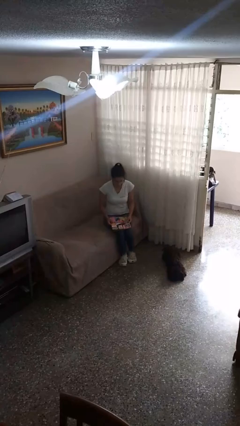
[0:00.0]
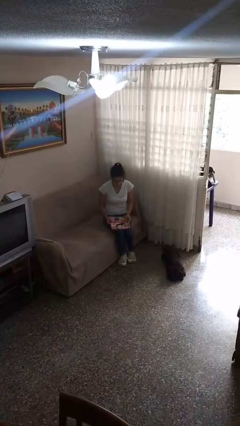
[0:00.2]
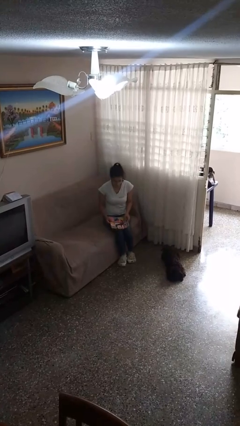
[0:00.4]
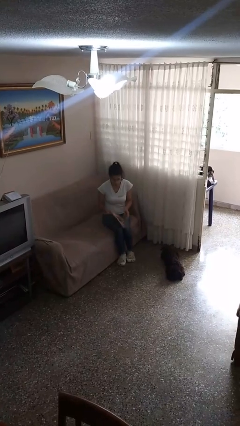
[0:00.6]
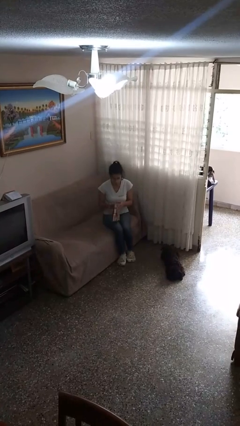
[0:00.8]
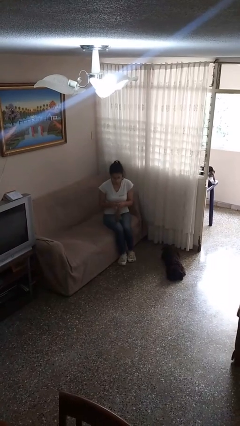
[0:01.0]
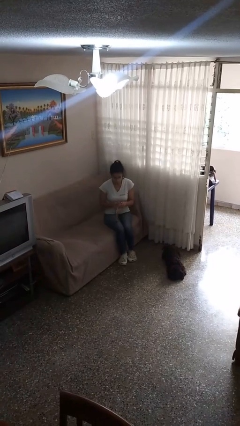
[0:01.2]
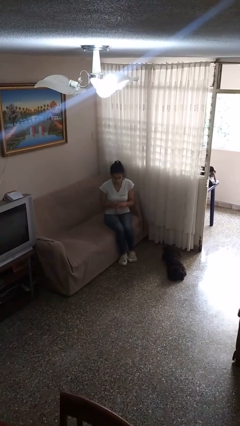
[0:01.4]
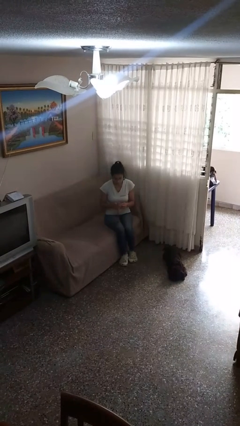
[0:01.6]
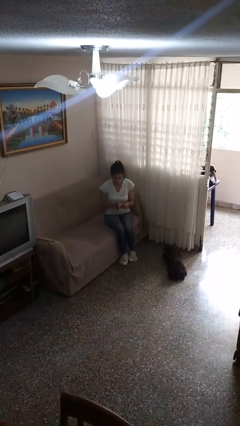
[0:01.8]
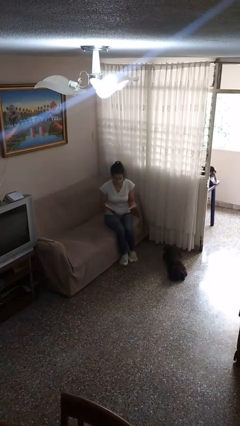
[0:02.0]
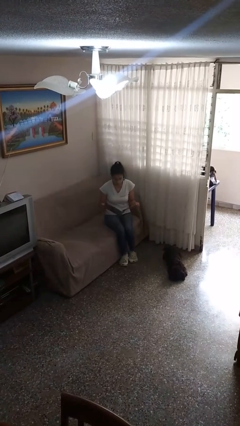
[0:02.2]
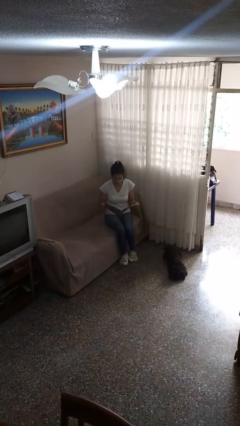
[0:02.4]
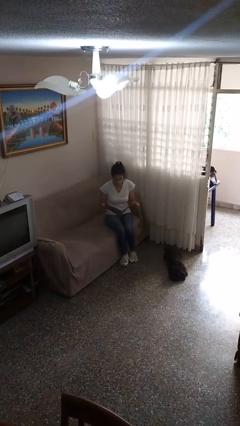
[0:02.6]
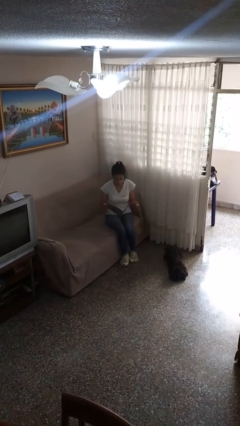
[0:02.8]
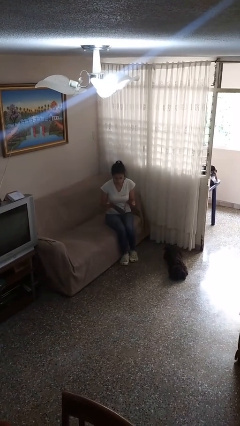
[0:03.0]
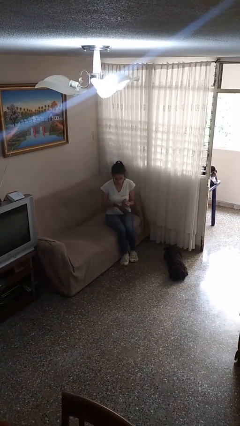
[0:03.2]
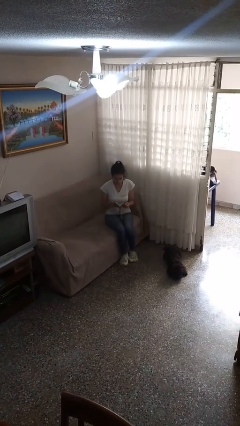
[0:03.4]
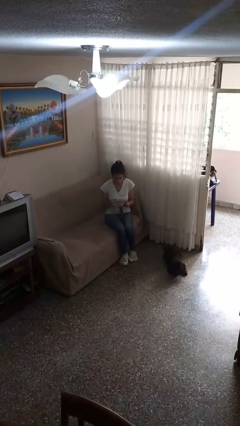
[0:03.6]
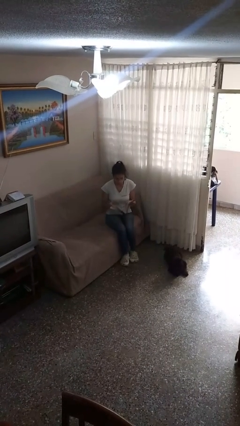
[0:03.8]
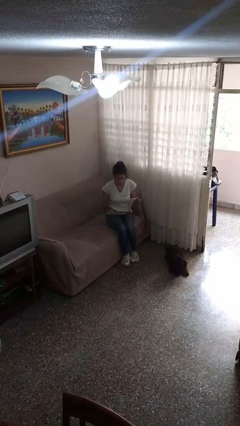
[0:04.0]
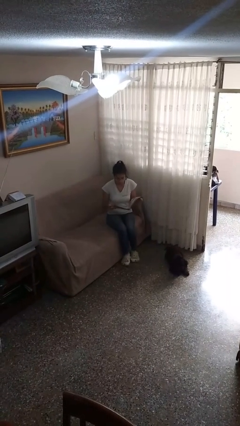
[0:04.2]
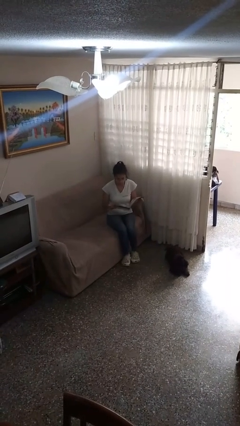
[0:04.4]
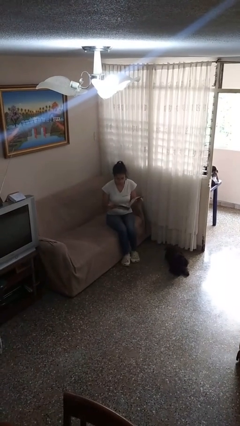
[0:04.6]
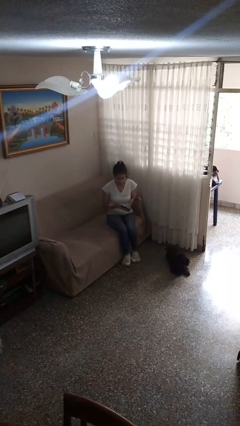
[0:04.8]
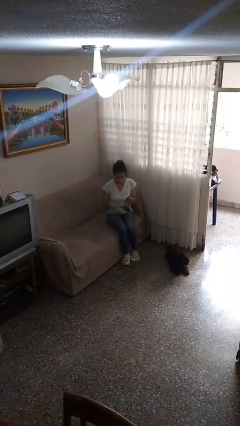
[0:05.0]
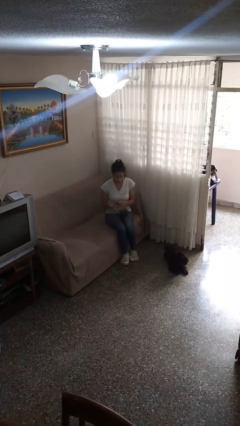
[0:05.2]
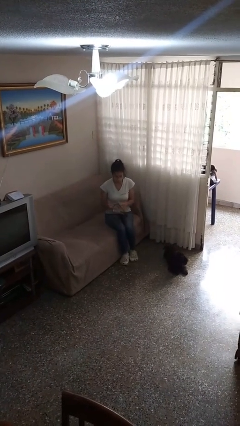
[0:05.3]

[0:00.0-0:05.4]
person reads magazine

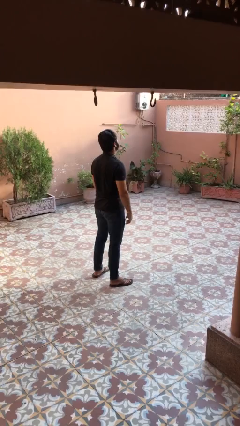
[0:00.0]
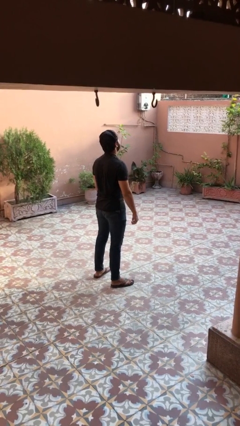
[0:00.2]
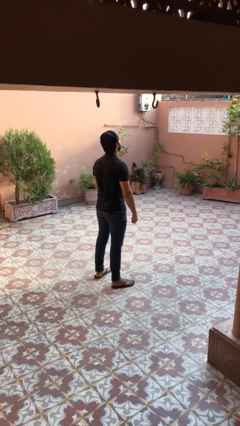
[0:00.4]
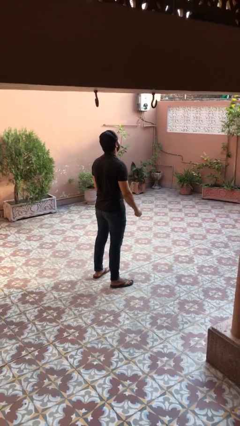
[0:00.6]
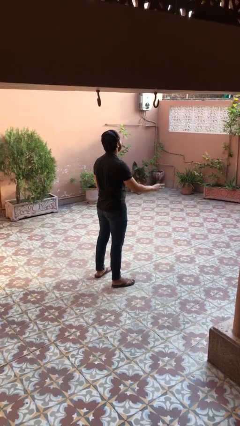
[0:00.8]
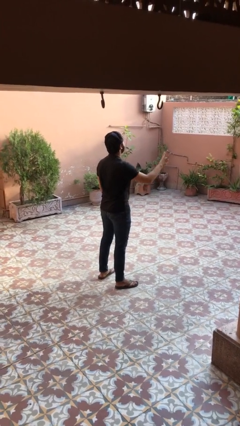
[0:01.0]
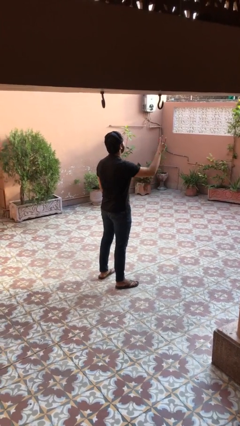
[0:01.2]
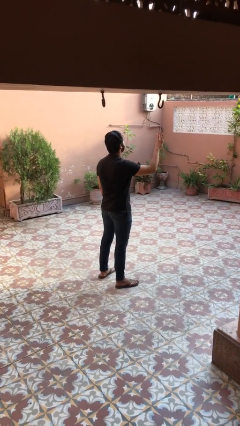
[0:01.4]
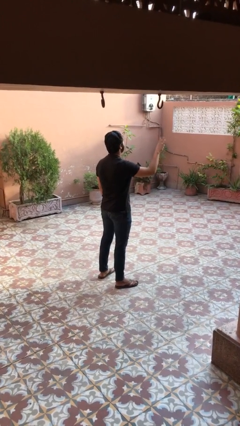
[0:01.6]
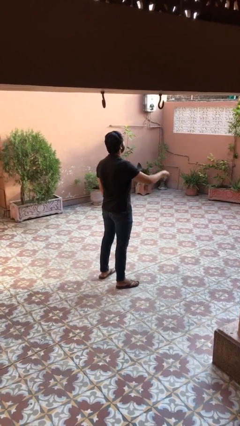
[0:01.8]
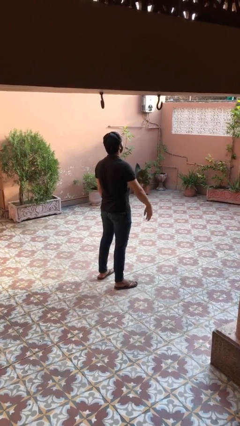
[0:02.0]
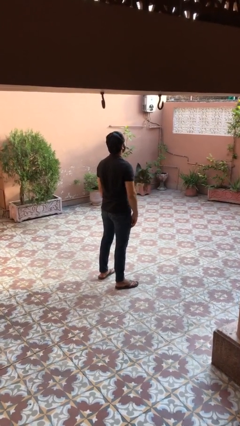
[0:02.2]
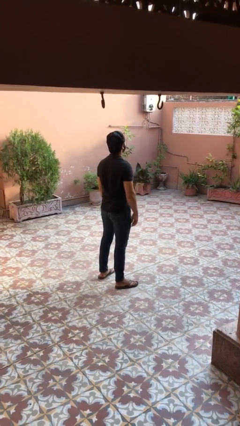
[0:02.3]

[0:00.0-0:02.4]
person gestures number three

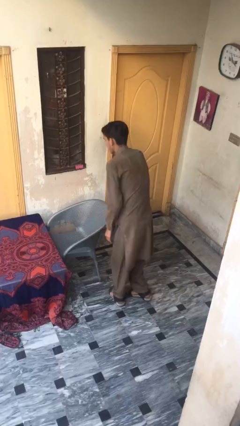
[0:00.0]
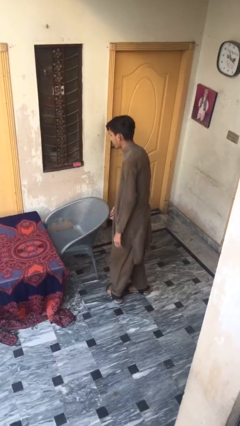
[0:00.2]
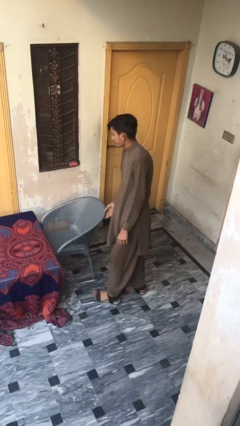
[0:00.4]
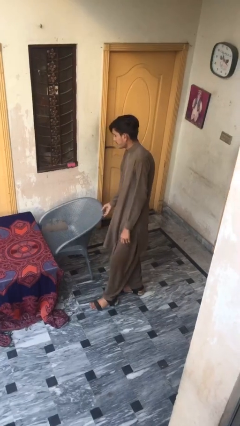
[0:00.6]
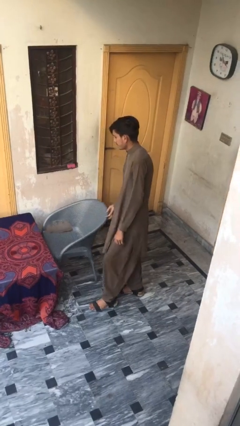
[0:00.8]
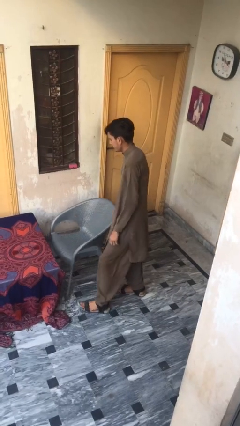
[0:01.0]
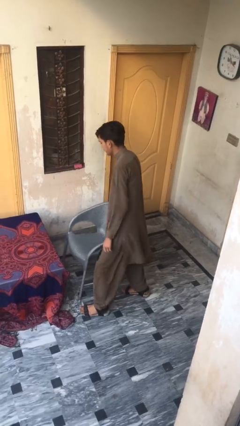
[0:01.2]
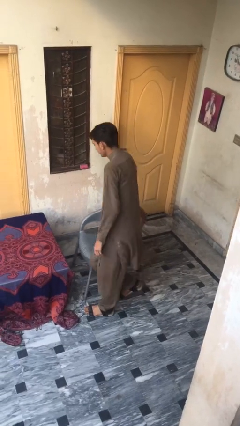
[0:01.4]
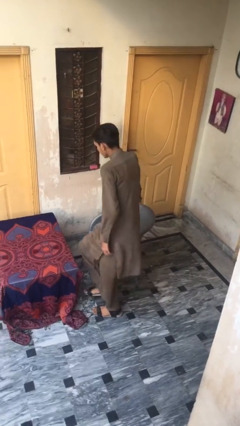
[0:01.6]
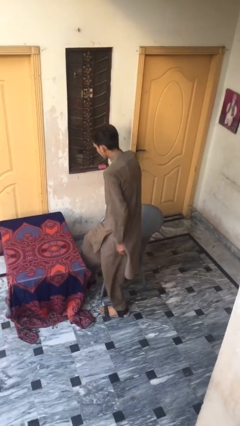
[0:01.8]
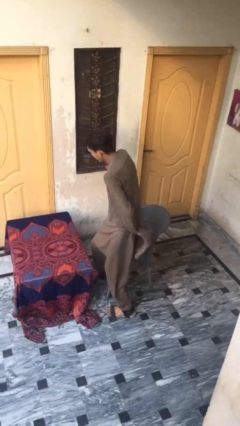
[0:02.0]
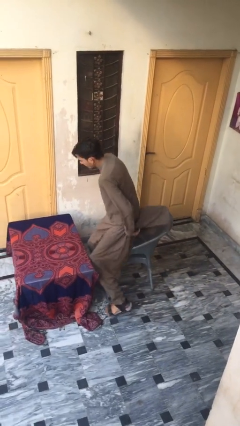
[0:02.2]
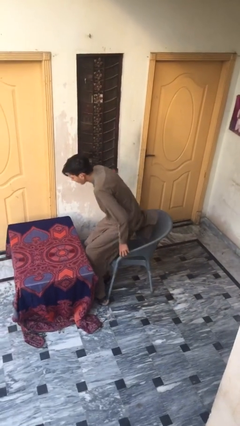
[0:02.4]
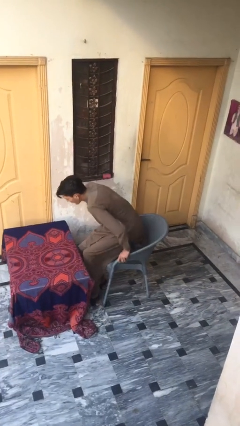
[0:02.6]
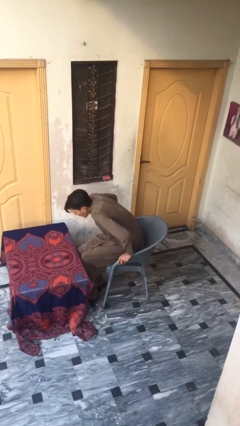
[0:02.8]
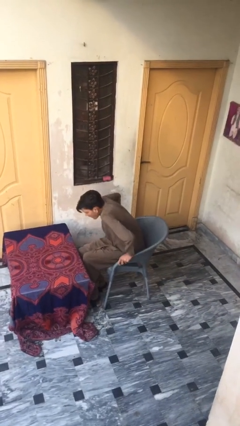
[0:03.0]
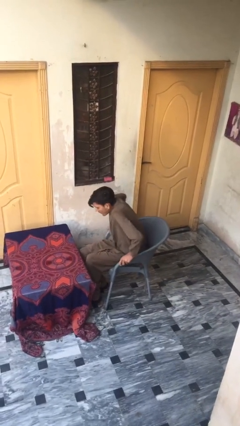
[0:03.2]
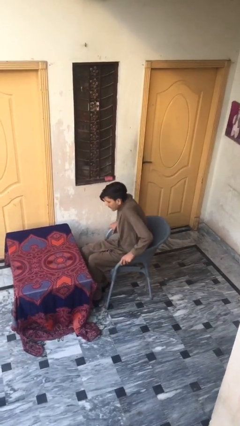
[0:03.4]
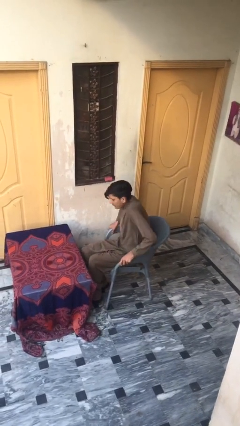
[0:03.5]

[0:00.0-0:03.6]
person sits down

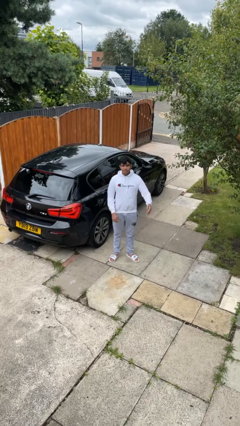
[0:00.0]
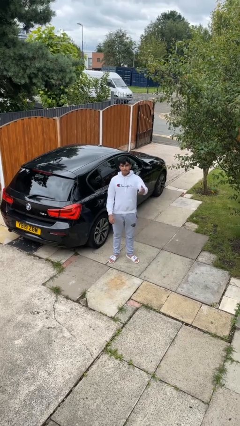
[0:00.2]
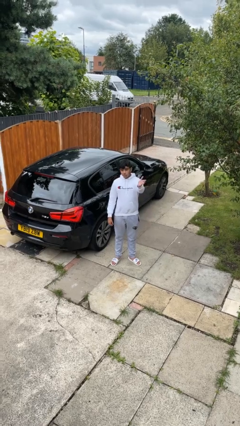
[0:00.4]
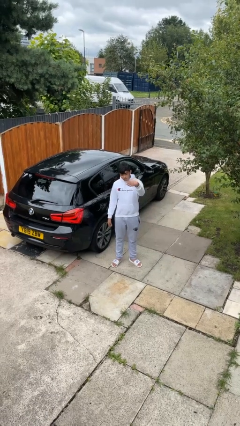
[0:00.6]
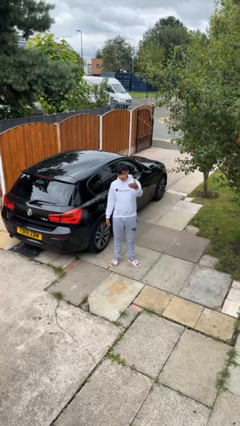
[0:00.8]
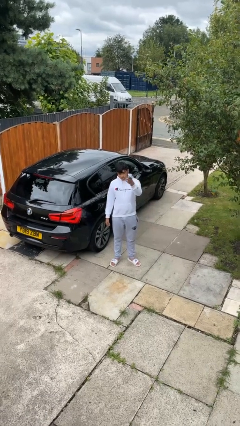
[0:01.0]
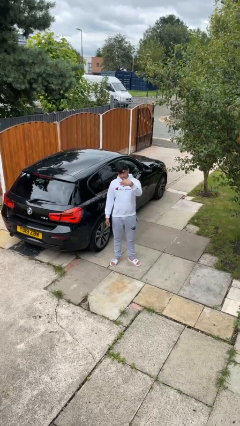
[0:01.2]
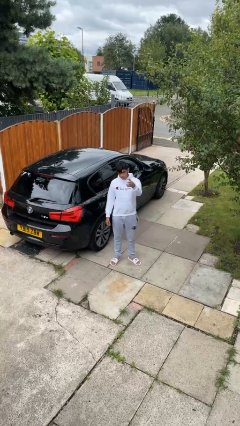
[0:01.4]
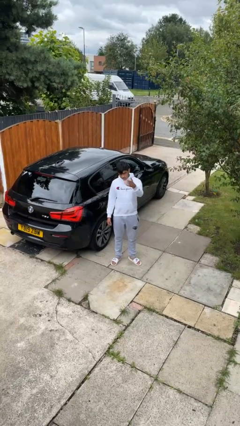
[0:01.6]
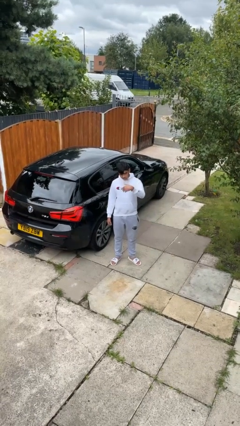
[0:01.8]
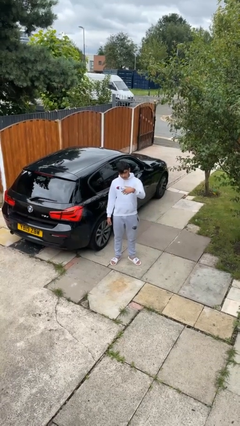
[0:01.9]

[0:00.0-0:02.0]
person gestures come here

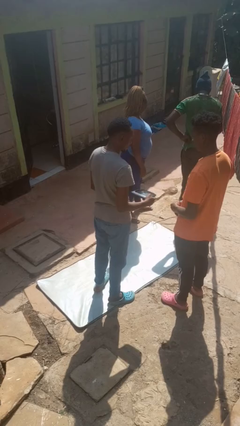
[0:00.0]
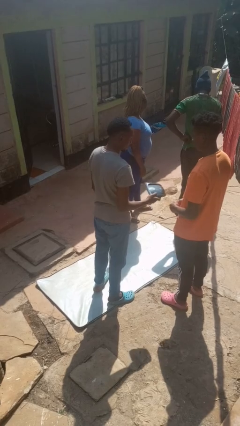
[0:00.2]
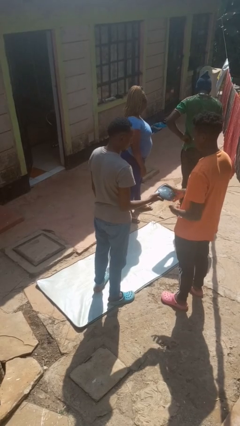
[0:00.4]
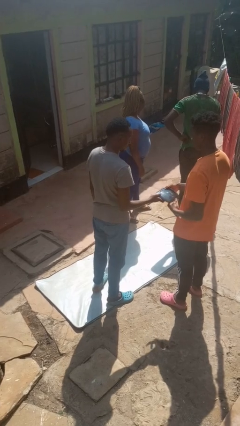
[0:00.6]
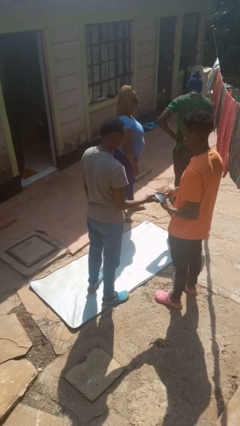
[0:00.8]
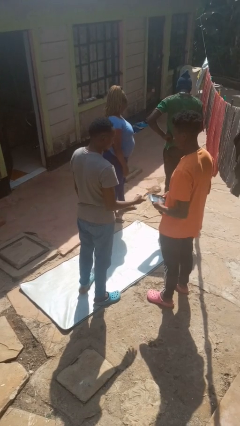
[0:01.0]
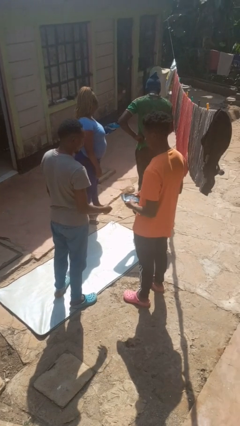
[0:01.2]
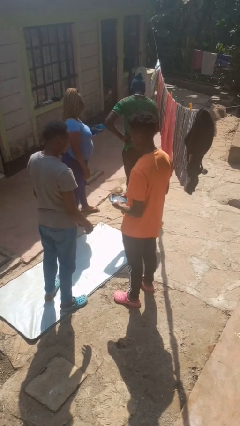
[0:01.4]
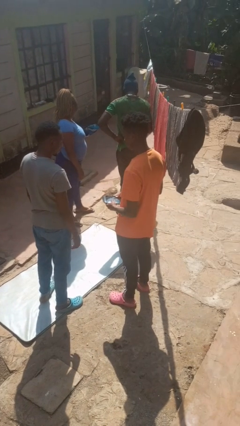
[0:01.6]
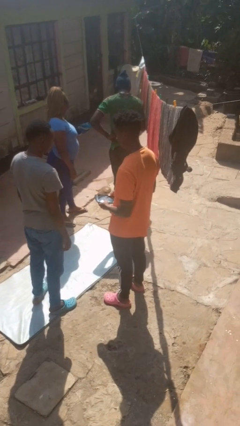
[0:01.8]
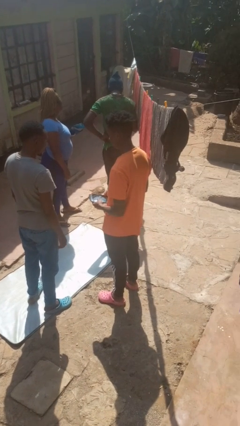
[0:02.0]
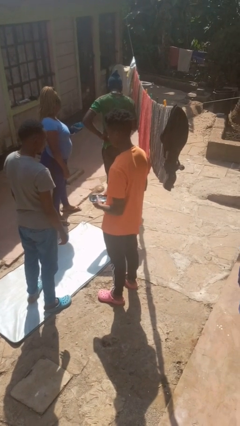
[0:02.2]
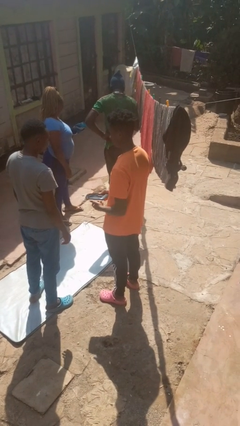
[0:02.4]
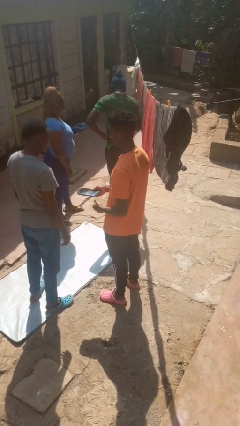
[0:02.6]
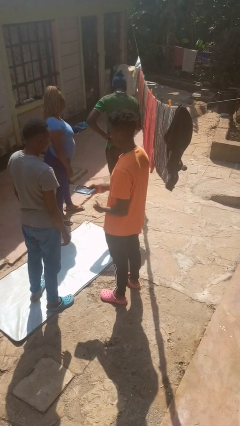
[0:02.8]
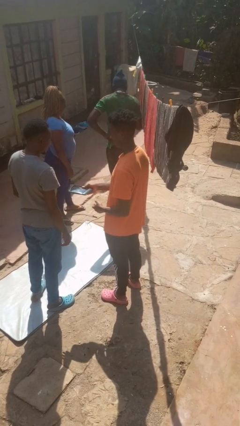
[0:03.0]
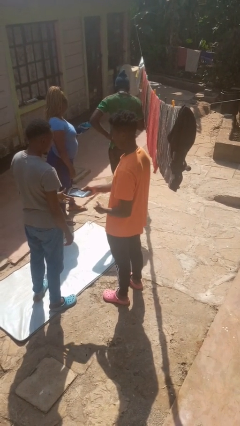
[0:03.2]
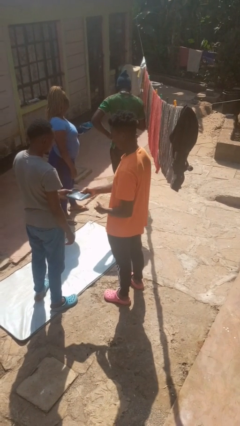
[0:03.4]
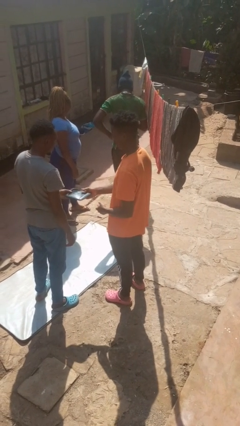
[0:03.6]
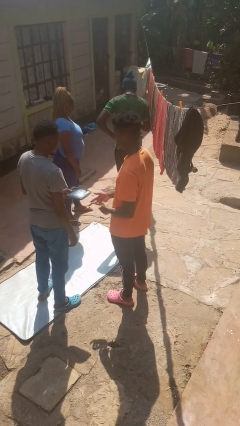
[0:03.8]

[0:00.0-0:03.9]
person transfers object to person

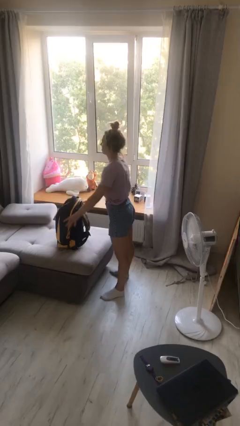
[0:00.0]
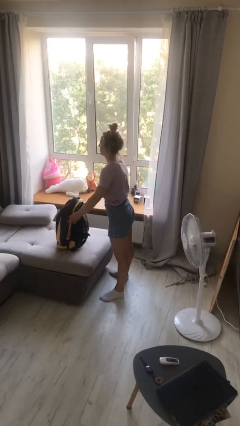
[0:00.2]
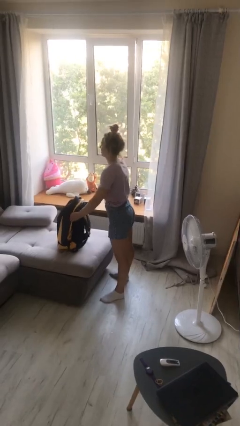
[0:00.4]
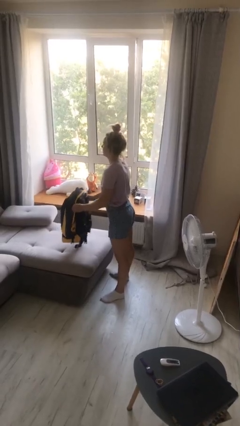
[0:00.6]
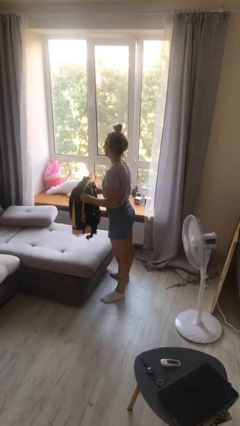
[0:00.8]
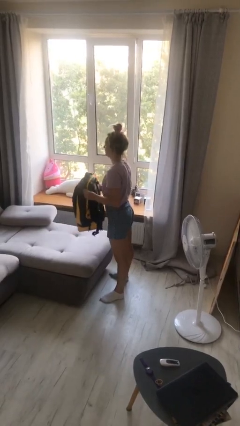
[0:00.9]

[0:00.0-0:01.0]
person picks up object from bed
